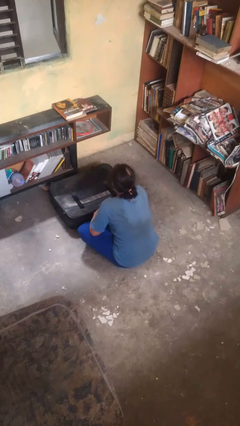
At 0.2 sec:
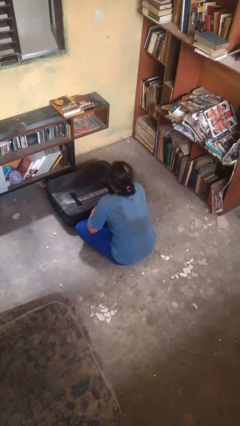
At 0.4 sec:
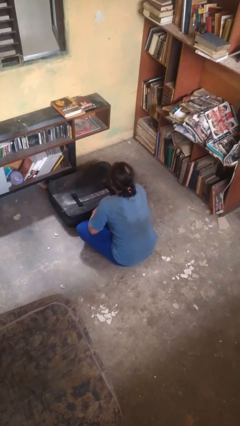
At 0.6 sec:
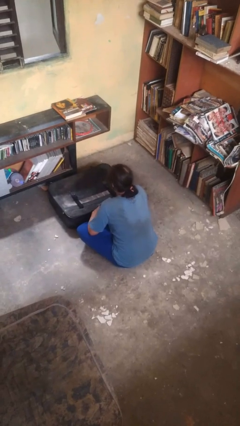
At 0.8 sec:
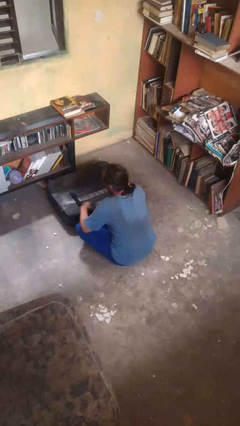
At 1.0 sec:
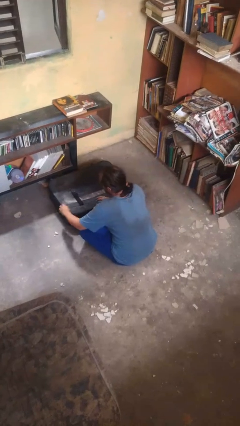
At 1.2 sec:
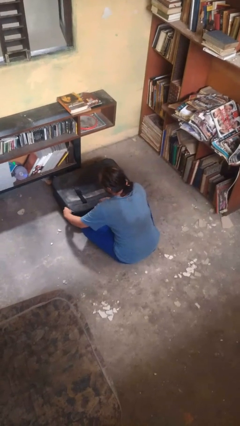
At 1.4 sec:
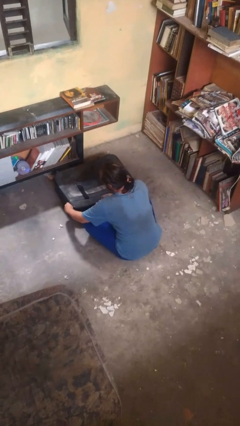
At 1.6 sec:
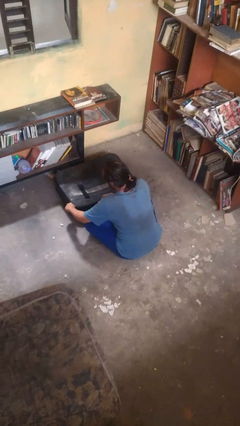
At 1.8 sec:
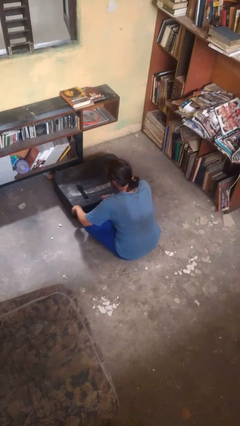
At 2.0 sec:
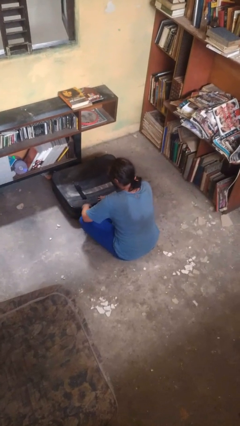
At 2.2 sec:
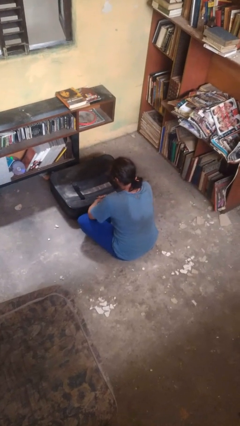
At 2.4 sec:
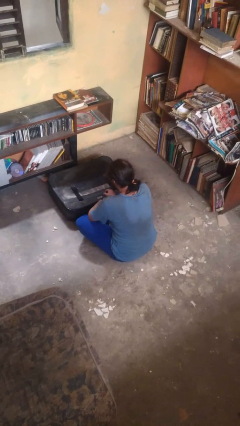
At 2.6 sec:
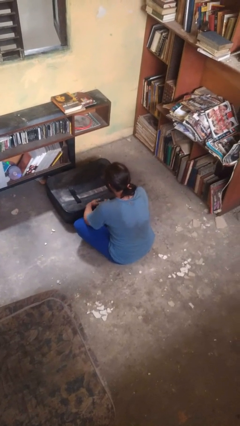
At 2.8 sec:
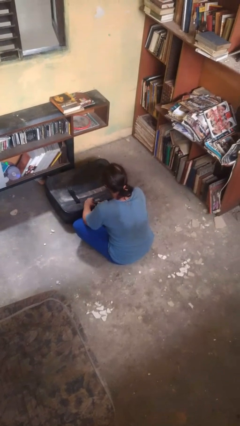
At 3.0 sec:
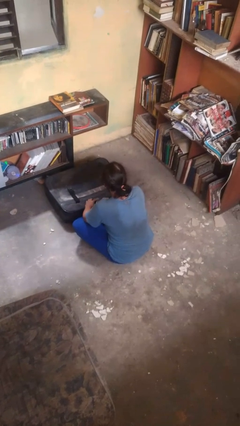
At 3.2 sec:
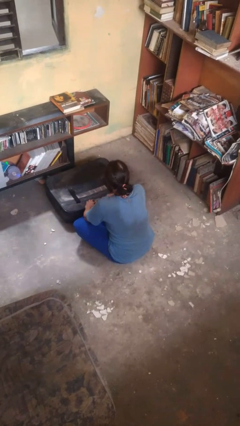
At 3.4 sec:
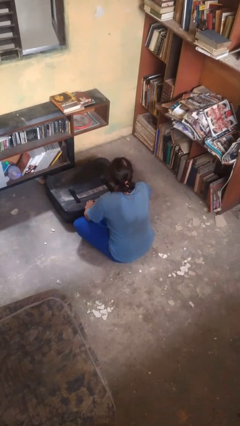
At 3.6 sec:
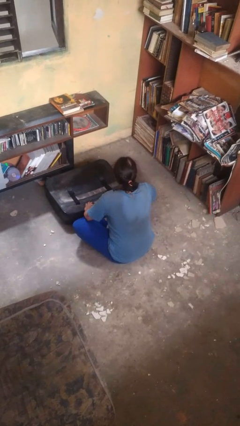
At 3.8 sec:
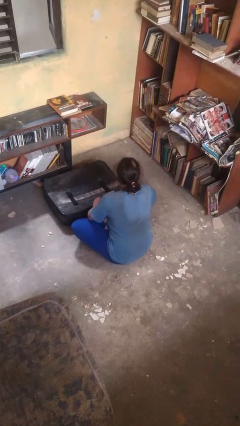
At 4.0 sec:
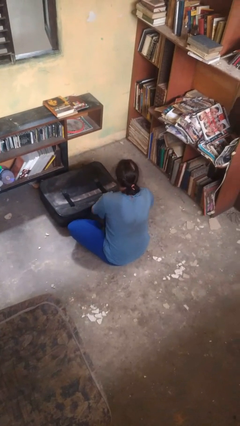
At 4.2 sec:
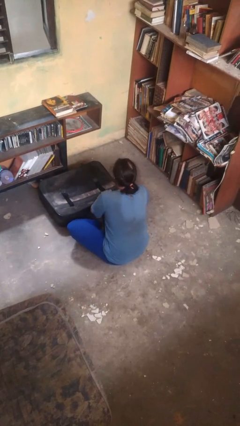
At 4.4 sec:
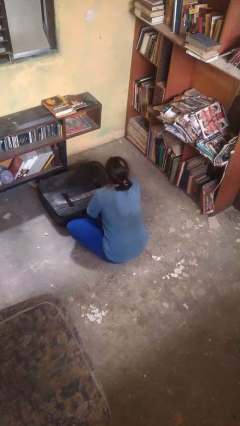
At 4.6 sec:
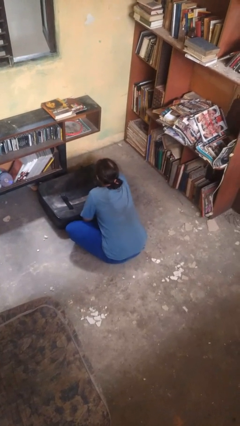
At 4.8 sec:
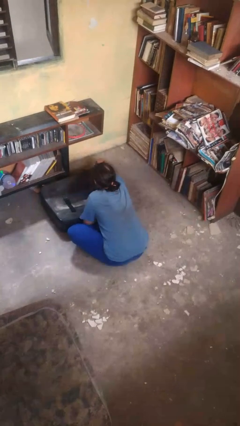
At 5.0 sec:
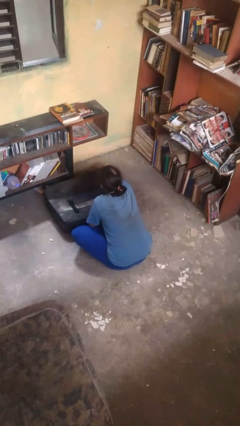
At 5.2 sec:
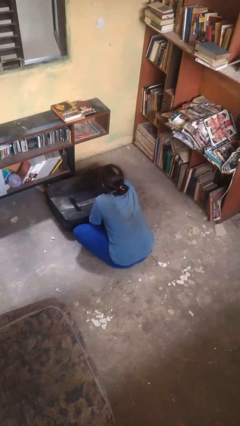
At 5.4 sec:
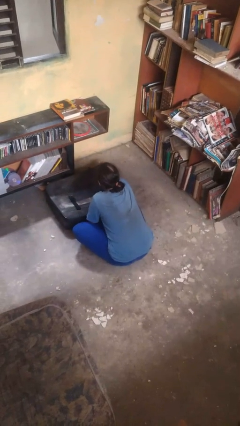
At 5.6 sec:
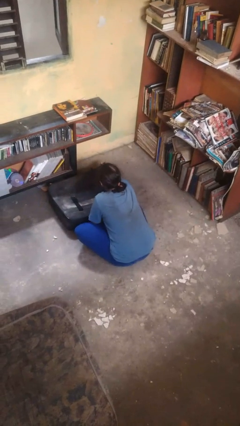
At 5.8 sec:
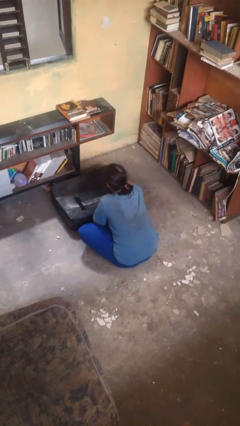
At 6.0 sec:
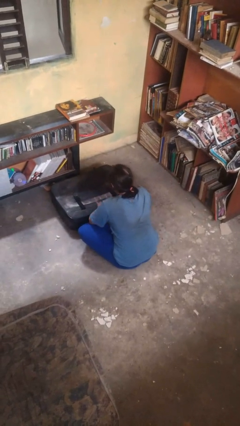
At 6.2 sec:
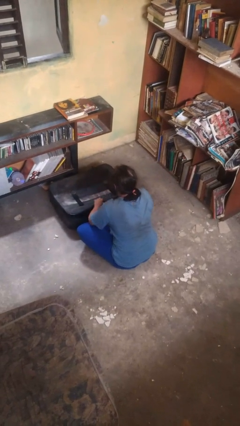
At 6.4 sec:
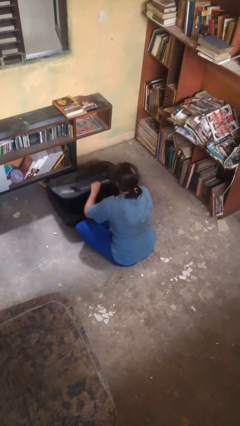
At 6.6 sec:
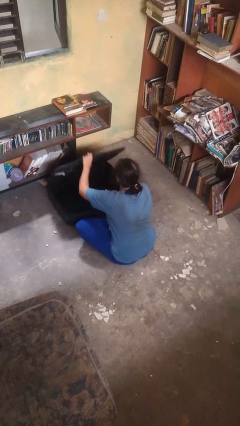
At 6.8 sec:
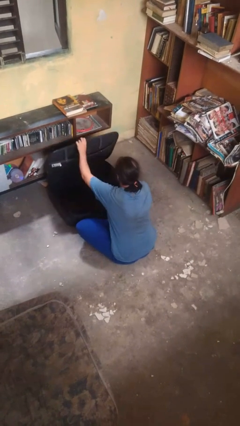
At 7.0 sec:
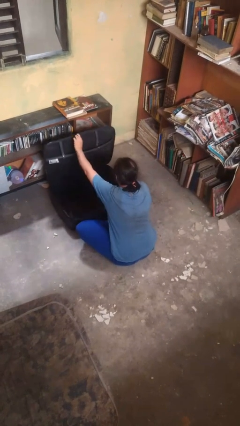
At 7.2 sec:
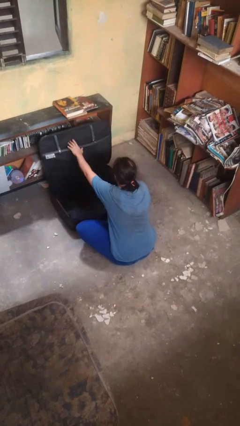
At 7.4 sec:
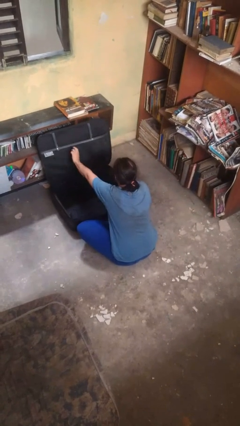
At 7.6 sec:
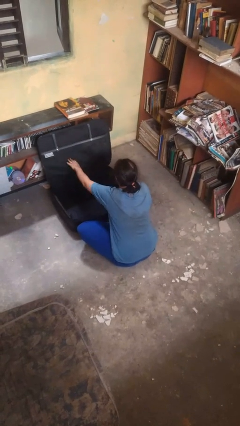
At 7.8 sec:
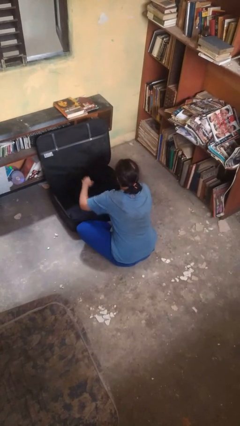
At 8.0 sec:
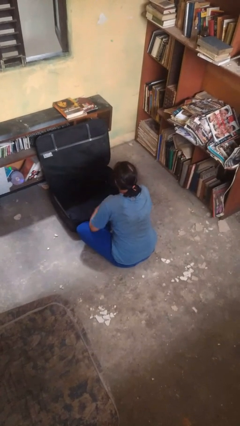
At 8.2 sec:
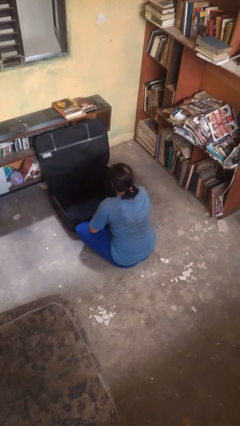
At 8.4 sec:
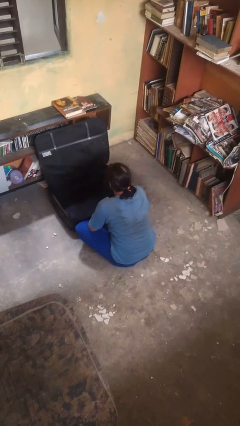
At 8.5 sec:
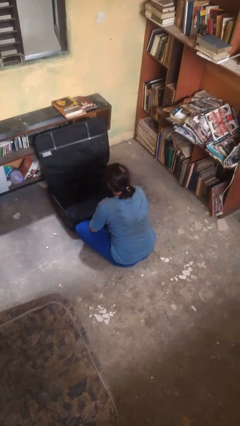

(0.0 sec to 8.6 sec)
person opens suitcase

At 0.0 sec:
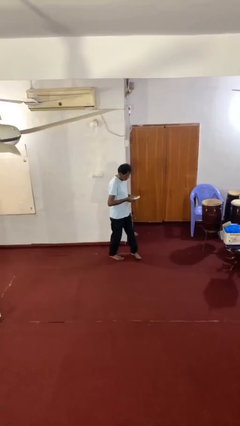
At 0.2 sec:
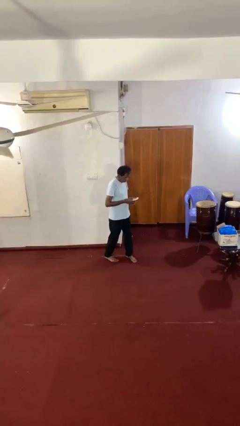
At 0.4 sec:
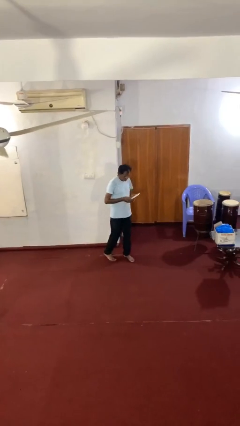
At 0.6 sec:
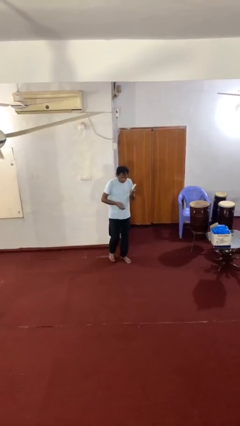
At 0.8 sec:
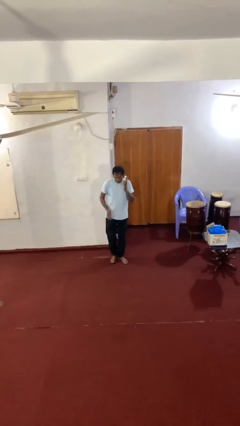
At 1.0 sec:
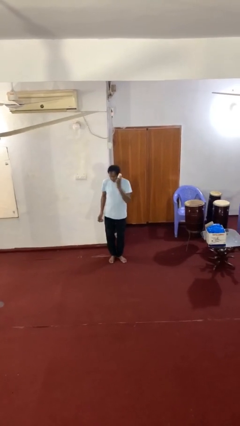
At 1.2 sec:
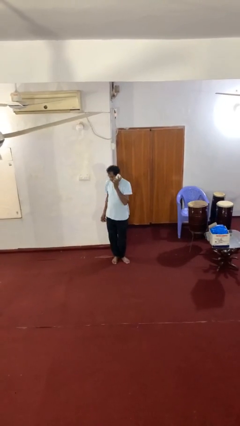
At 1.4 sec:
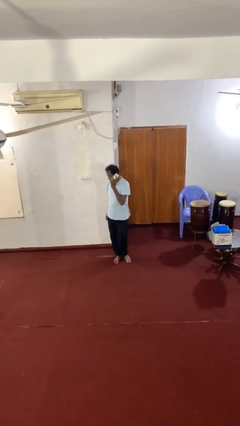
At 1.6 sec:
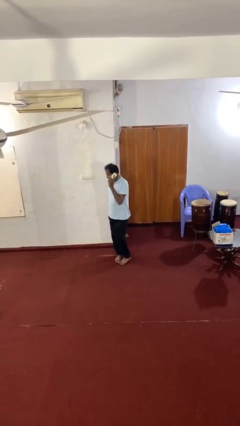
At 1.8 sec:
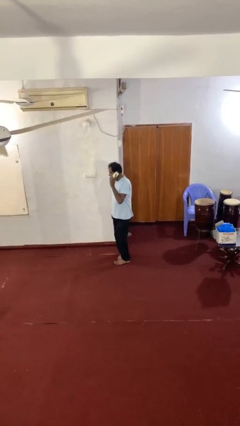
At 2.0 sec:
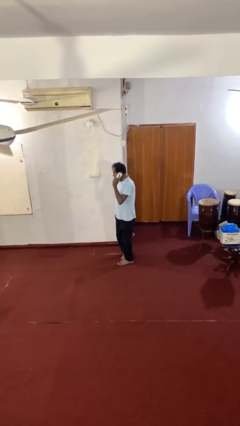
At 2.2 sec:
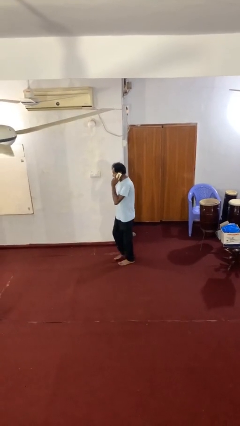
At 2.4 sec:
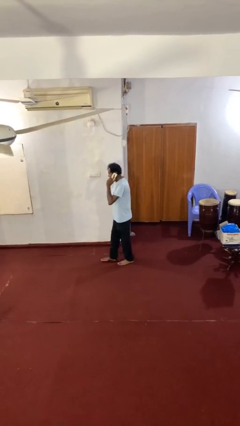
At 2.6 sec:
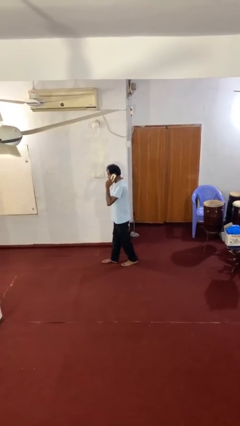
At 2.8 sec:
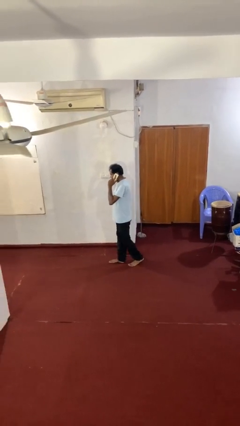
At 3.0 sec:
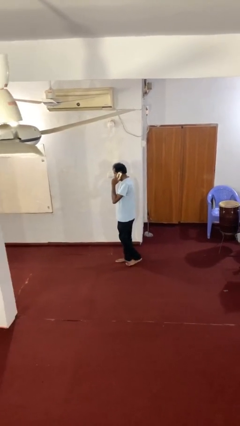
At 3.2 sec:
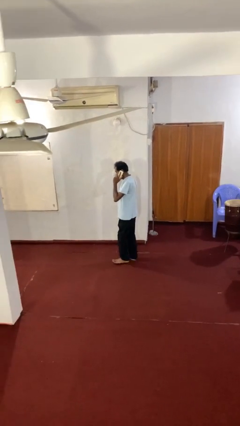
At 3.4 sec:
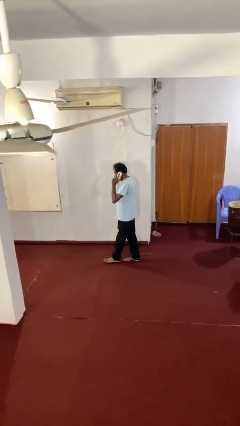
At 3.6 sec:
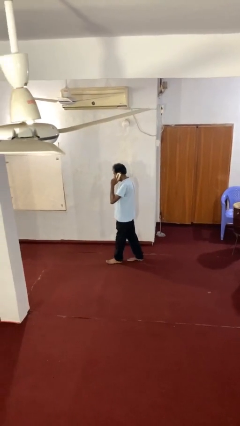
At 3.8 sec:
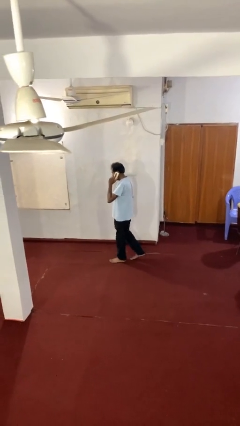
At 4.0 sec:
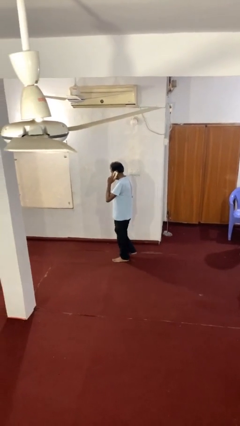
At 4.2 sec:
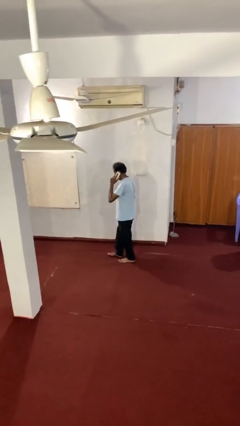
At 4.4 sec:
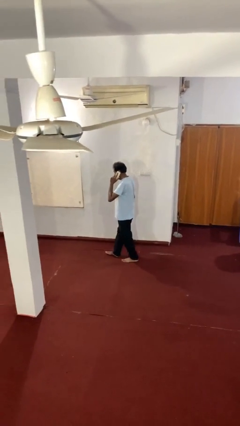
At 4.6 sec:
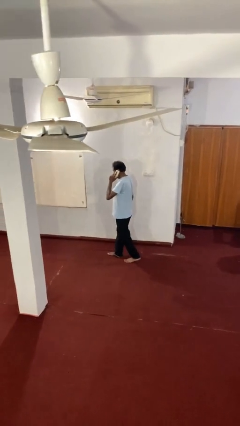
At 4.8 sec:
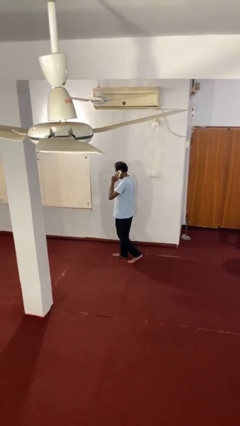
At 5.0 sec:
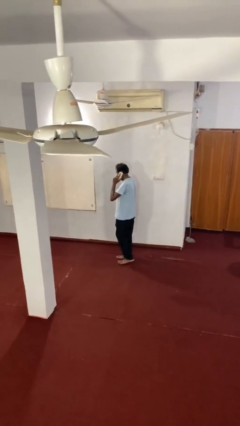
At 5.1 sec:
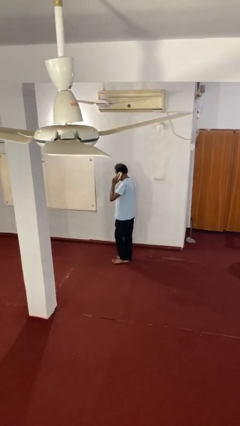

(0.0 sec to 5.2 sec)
person talks on phone

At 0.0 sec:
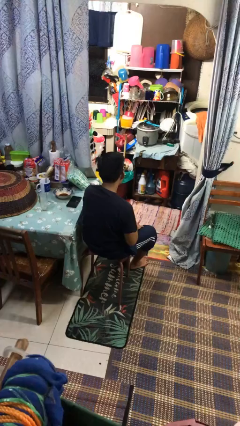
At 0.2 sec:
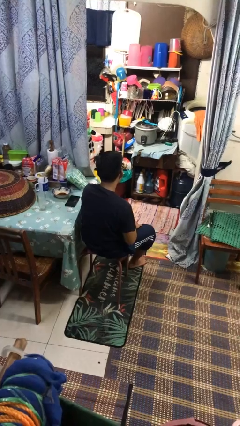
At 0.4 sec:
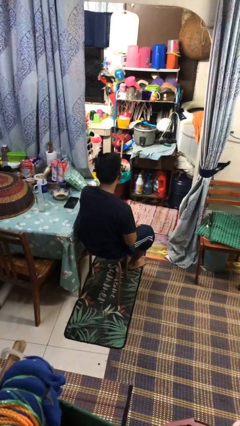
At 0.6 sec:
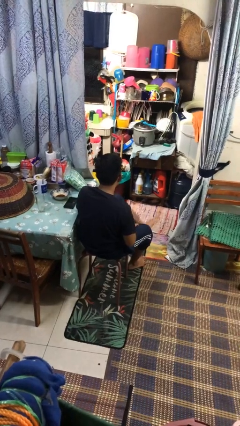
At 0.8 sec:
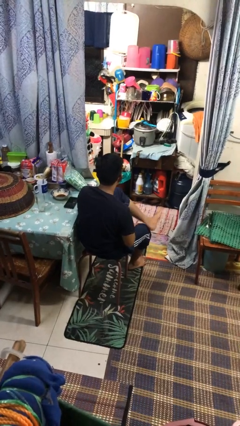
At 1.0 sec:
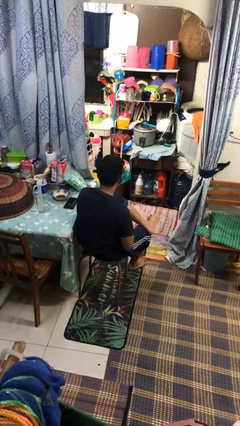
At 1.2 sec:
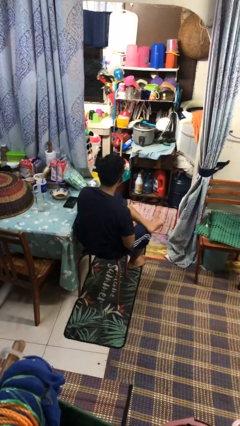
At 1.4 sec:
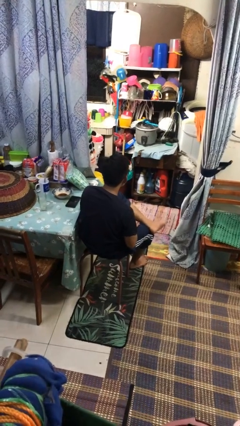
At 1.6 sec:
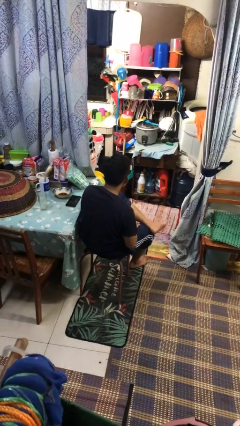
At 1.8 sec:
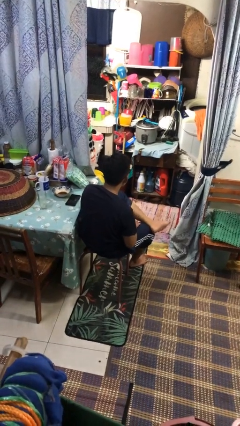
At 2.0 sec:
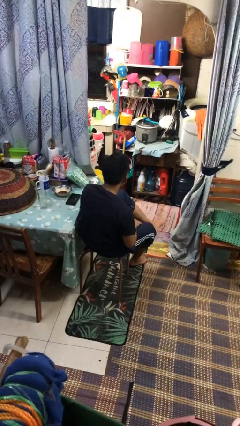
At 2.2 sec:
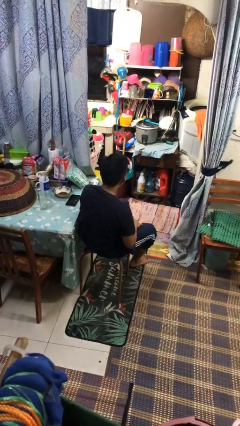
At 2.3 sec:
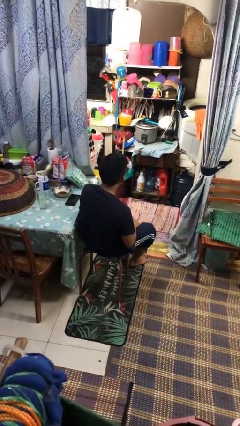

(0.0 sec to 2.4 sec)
person crosses legs

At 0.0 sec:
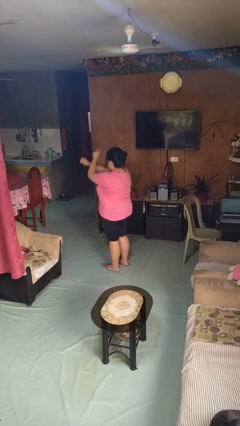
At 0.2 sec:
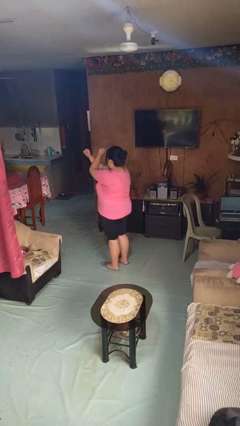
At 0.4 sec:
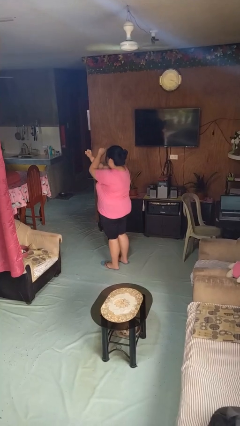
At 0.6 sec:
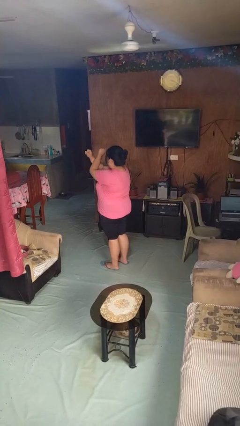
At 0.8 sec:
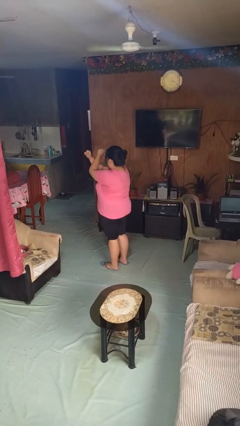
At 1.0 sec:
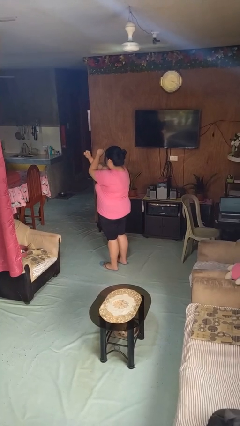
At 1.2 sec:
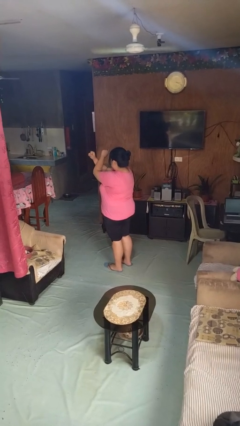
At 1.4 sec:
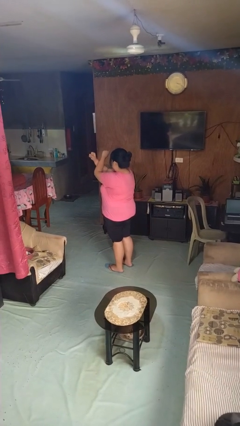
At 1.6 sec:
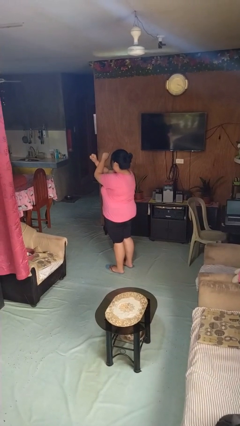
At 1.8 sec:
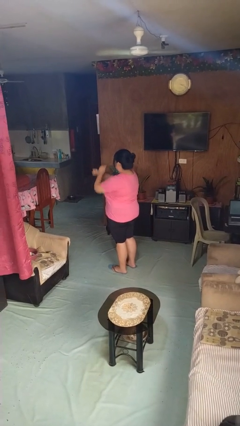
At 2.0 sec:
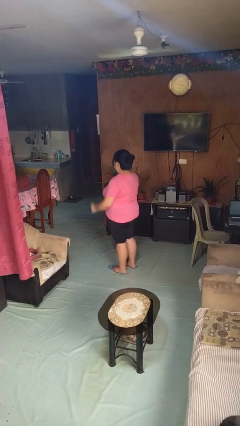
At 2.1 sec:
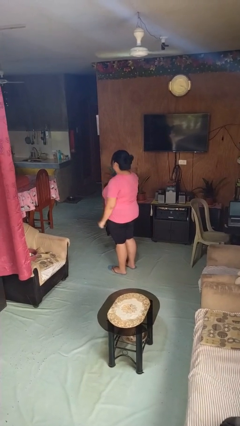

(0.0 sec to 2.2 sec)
person gestures arms x
